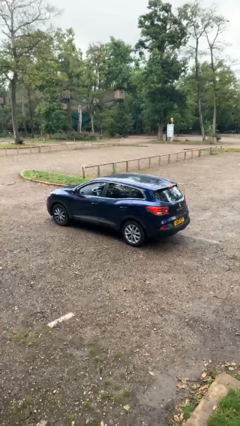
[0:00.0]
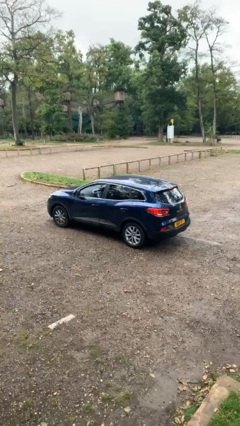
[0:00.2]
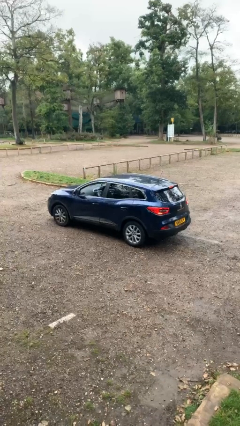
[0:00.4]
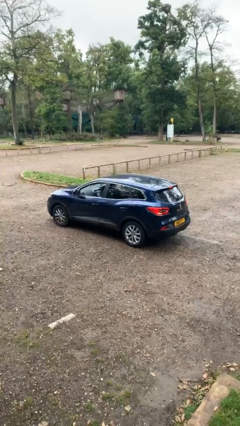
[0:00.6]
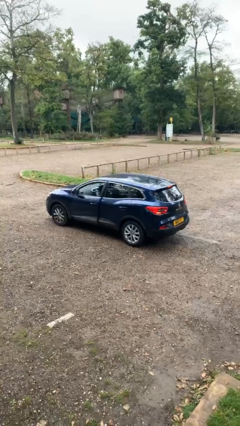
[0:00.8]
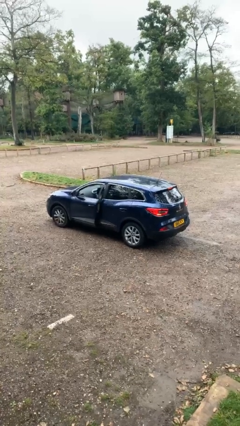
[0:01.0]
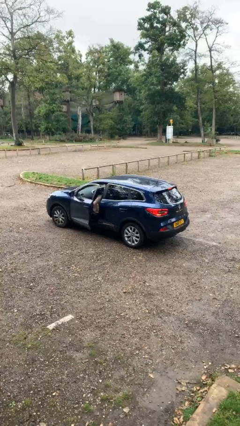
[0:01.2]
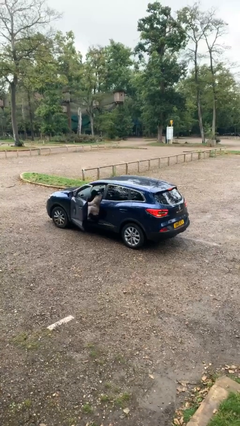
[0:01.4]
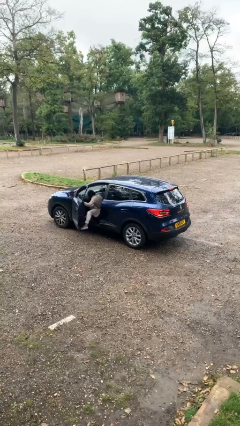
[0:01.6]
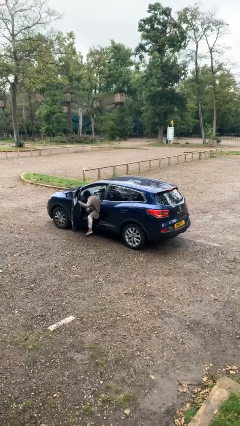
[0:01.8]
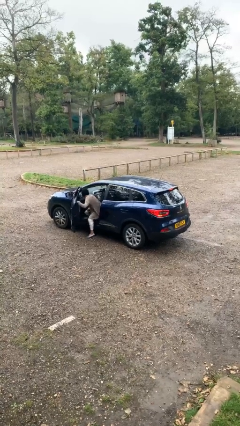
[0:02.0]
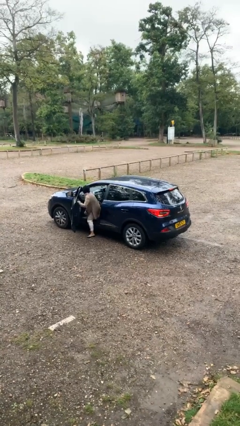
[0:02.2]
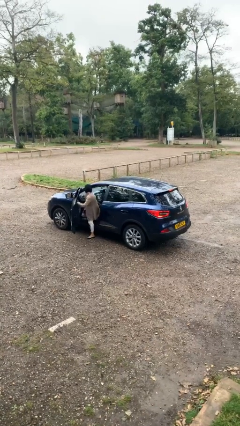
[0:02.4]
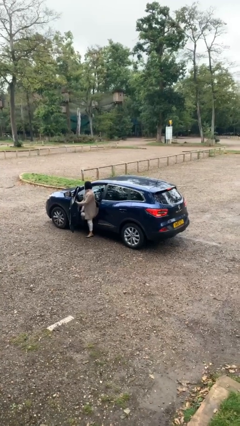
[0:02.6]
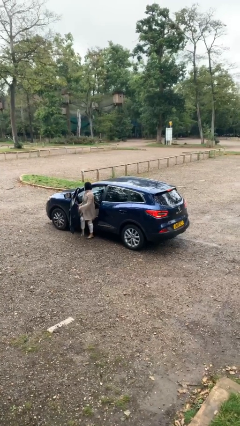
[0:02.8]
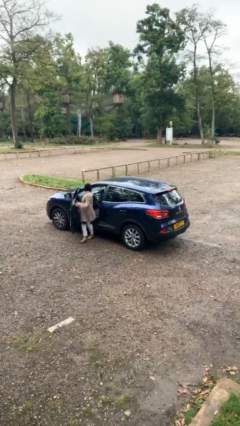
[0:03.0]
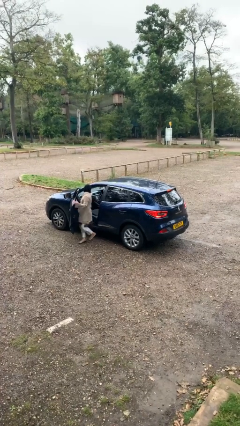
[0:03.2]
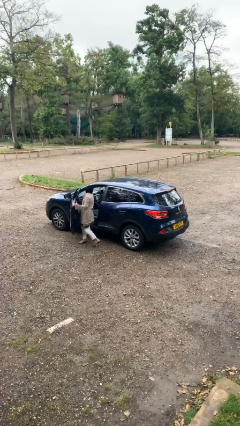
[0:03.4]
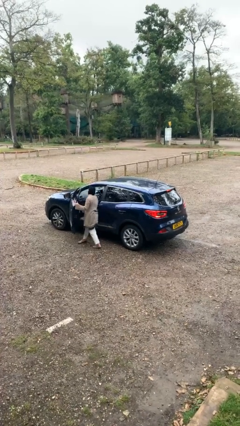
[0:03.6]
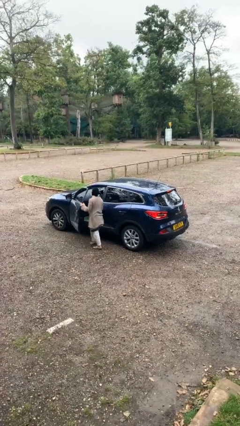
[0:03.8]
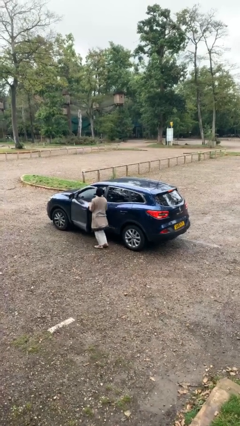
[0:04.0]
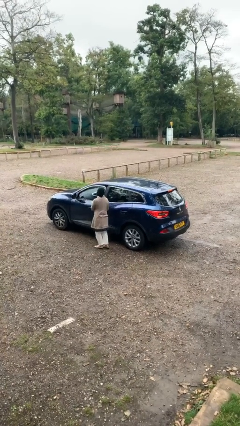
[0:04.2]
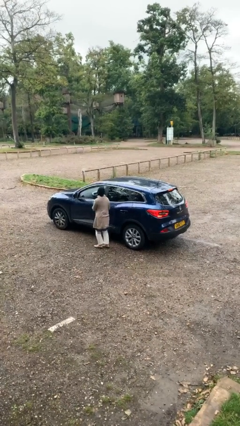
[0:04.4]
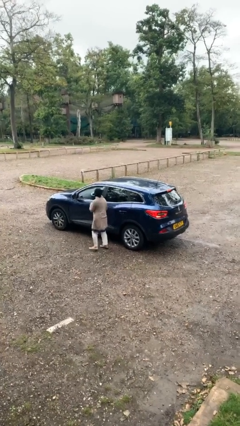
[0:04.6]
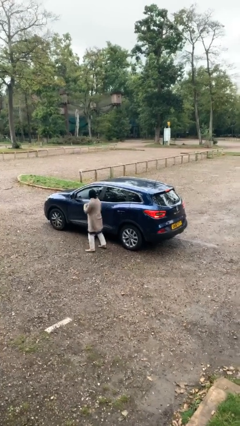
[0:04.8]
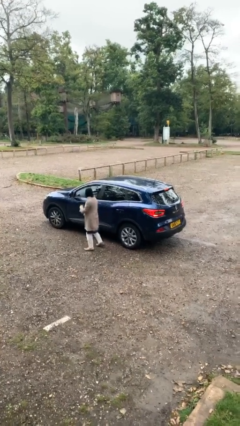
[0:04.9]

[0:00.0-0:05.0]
car drops off person

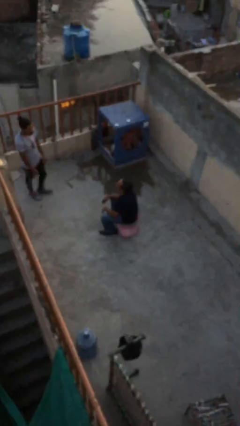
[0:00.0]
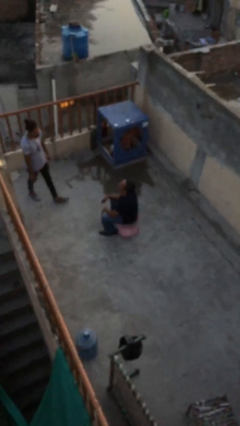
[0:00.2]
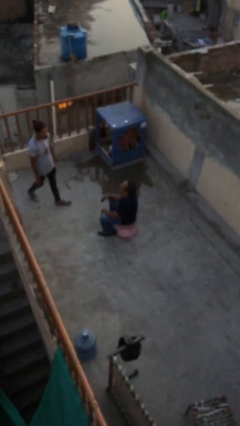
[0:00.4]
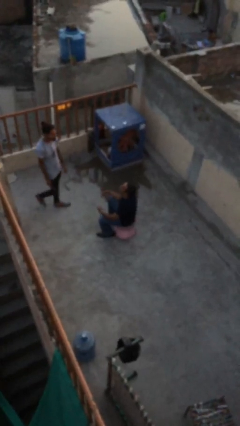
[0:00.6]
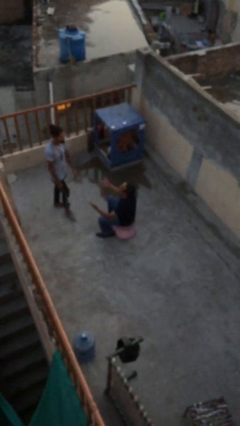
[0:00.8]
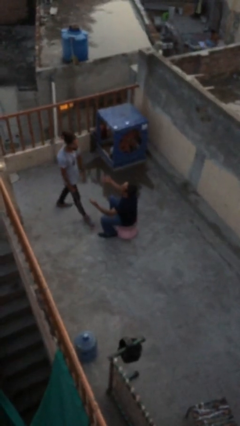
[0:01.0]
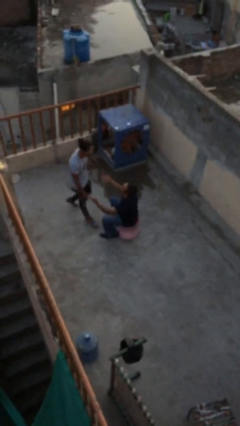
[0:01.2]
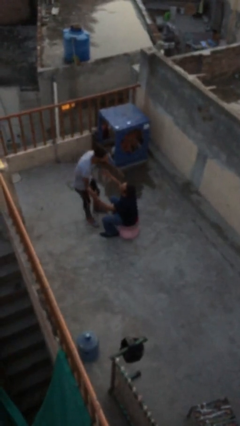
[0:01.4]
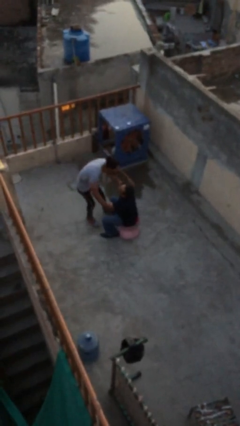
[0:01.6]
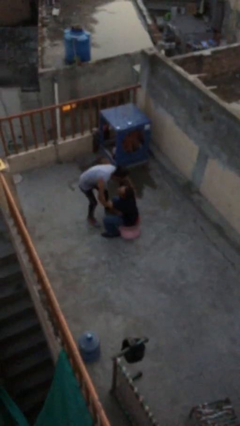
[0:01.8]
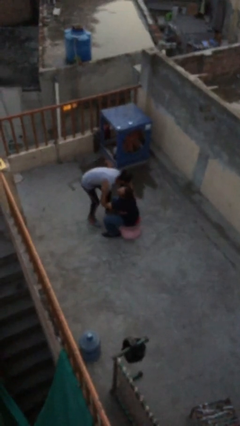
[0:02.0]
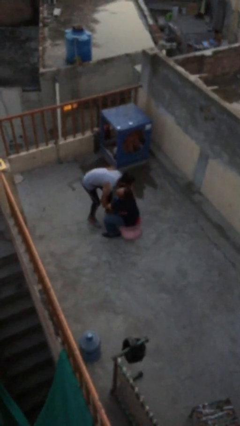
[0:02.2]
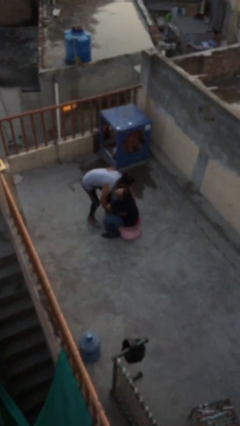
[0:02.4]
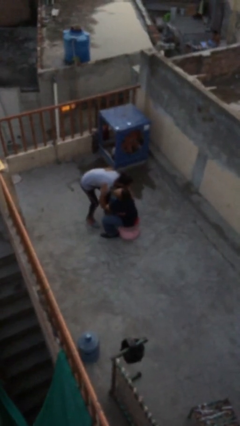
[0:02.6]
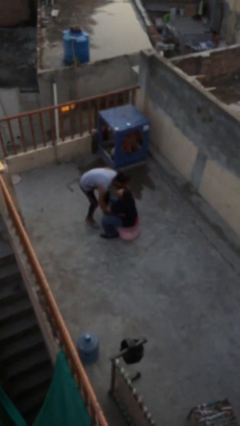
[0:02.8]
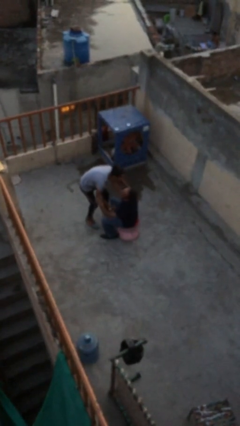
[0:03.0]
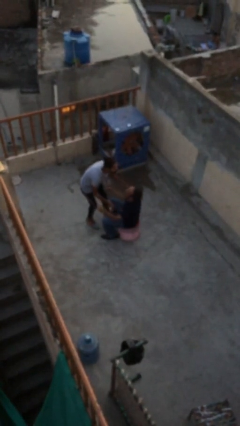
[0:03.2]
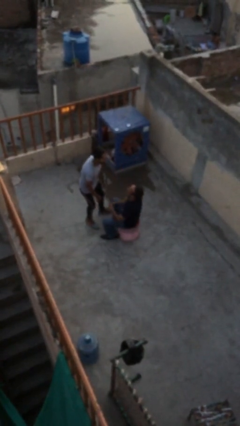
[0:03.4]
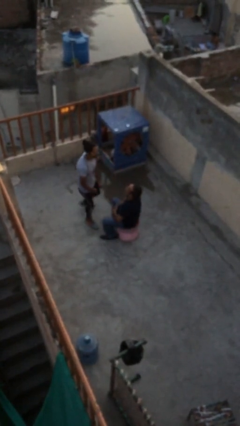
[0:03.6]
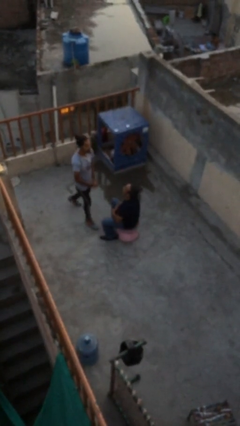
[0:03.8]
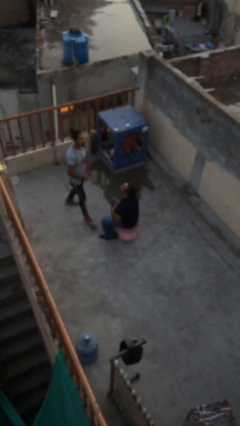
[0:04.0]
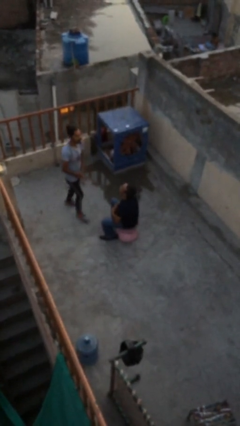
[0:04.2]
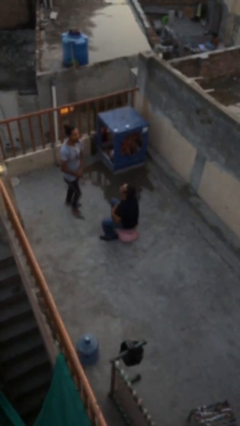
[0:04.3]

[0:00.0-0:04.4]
person embraces person

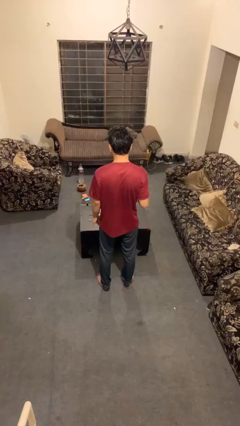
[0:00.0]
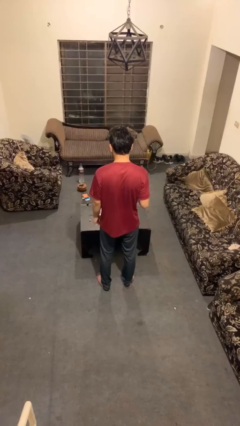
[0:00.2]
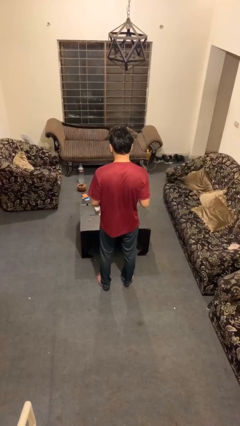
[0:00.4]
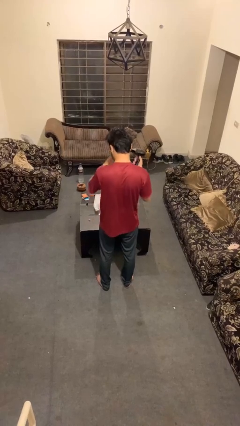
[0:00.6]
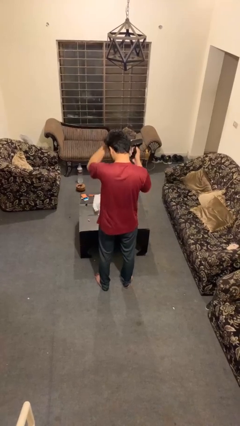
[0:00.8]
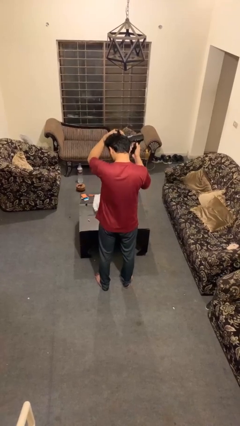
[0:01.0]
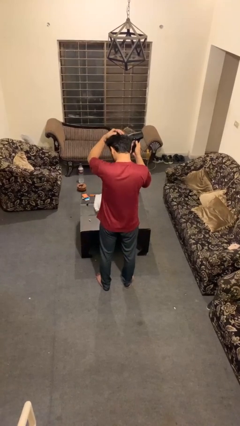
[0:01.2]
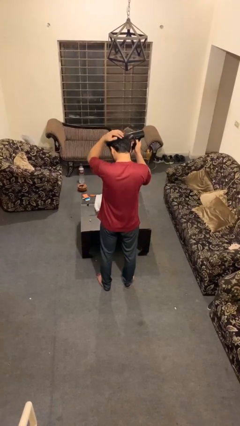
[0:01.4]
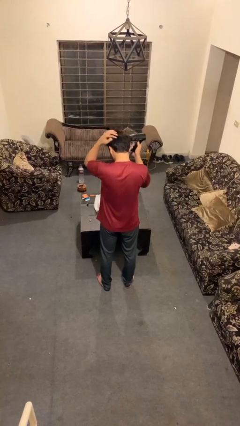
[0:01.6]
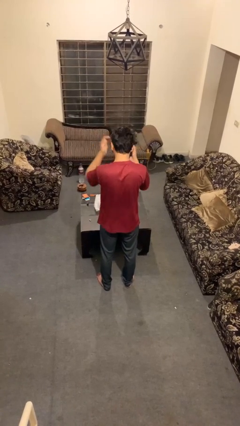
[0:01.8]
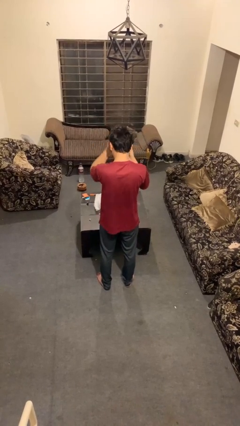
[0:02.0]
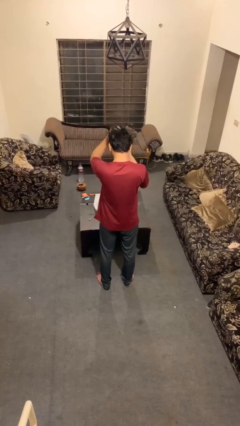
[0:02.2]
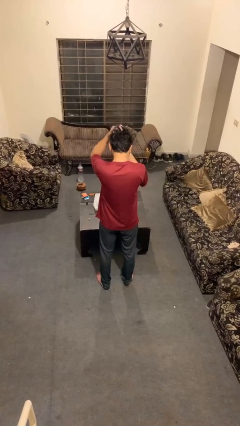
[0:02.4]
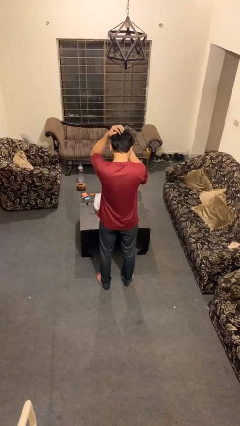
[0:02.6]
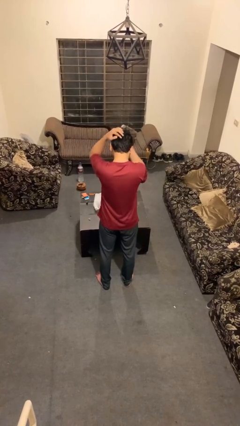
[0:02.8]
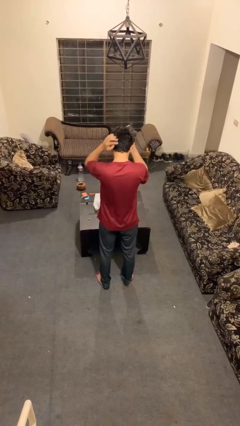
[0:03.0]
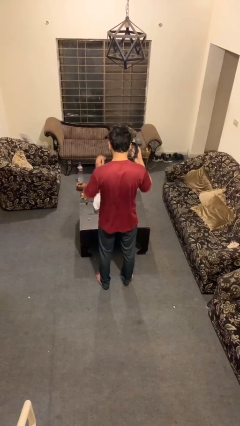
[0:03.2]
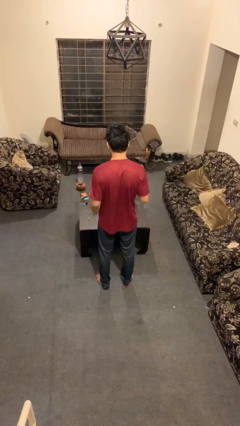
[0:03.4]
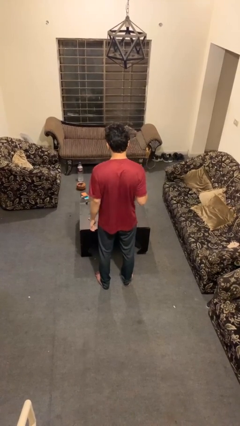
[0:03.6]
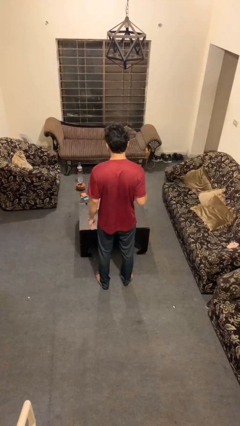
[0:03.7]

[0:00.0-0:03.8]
person dries hair with hairdryer

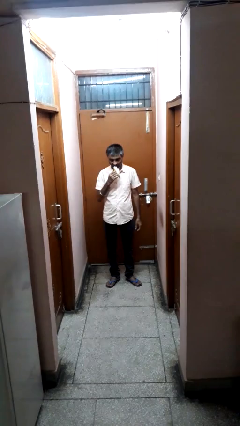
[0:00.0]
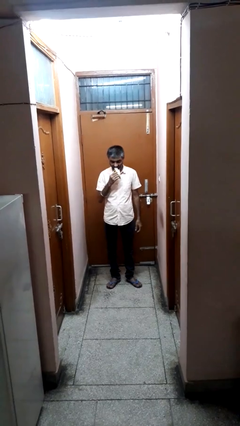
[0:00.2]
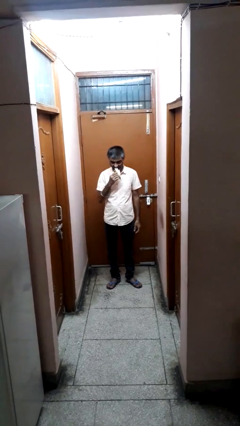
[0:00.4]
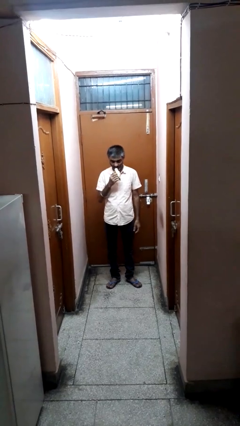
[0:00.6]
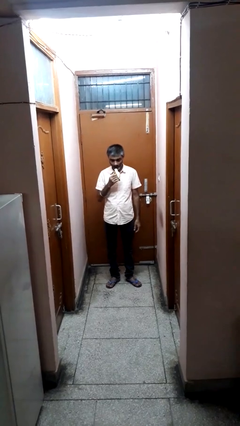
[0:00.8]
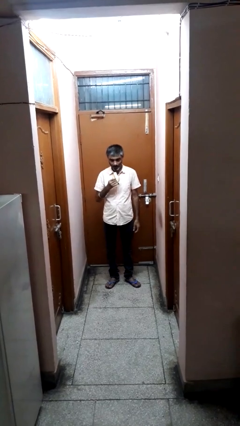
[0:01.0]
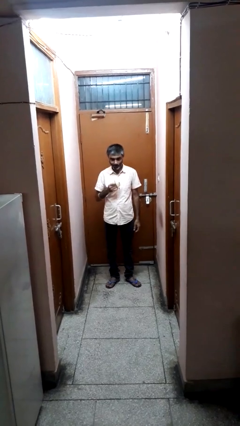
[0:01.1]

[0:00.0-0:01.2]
person eats banana

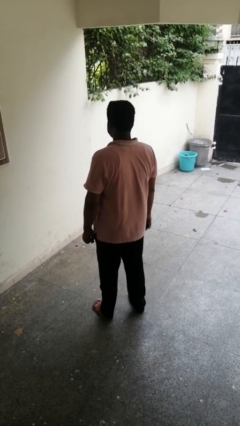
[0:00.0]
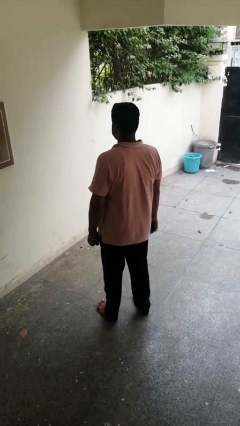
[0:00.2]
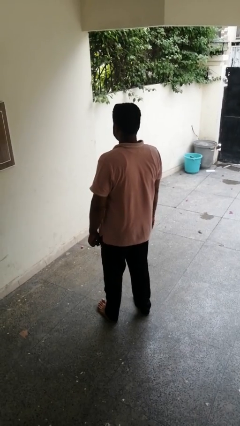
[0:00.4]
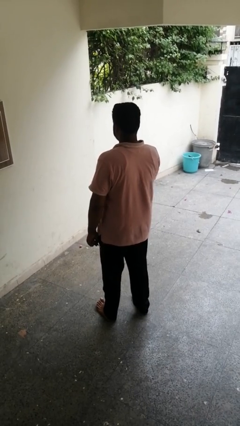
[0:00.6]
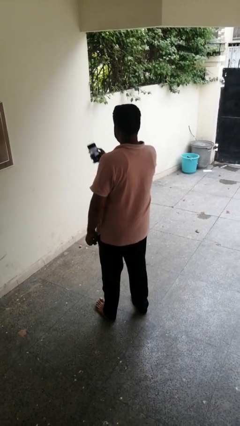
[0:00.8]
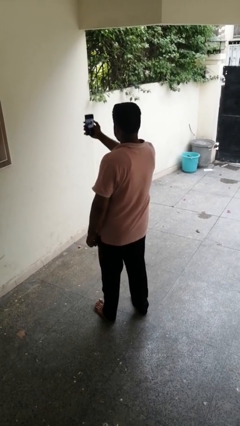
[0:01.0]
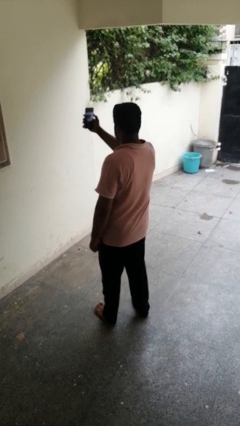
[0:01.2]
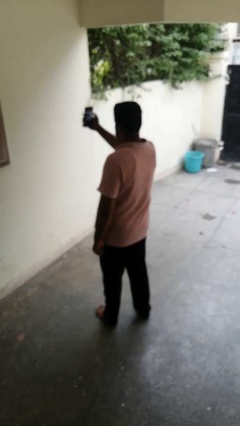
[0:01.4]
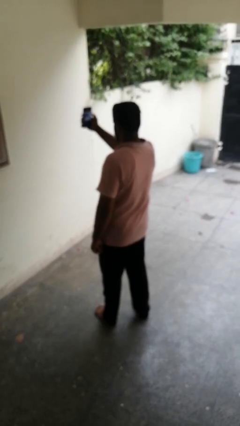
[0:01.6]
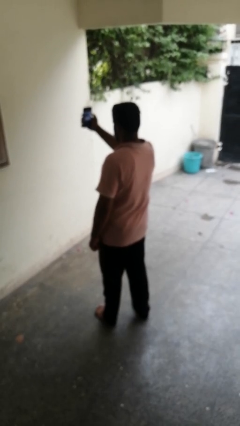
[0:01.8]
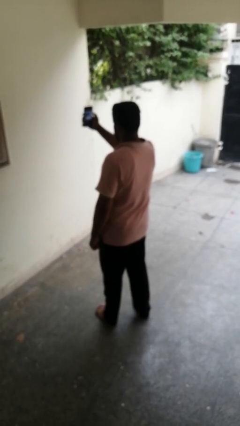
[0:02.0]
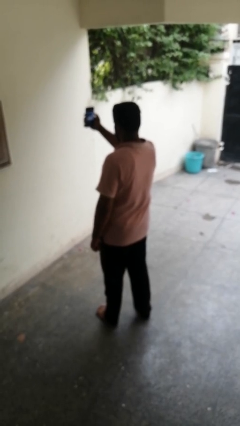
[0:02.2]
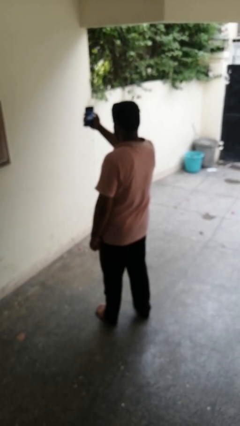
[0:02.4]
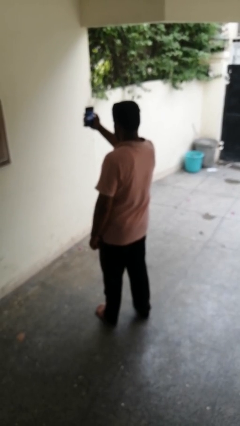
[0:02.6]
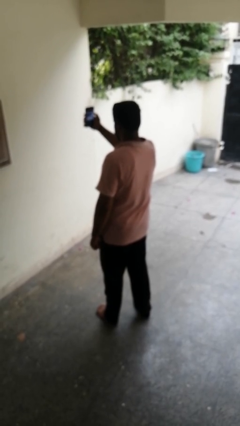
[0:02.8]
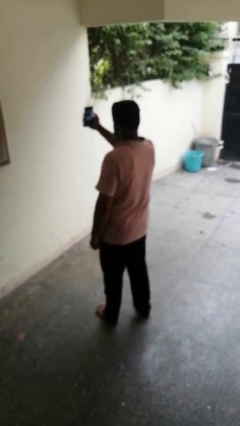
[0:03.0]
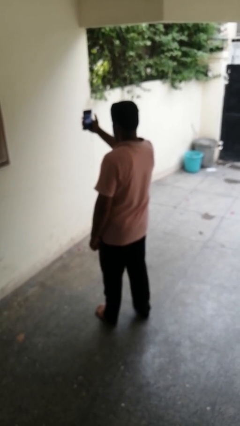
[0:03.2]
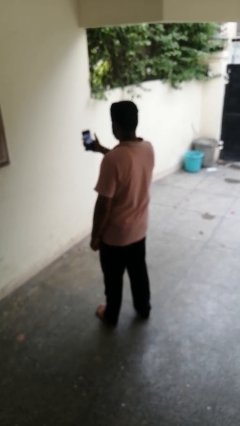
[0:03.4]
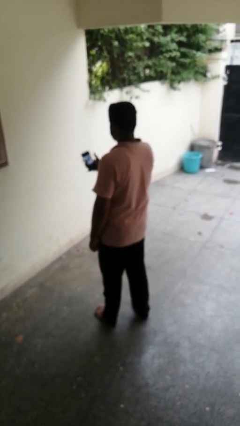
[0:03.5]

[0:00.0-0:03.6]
person takes selfie
